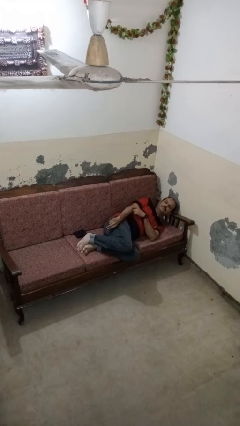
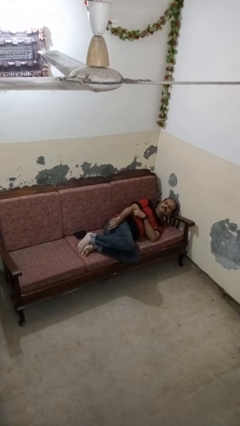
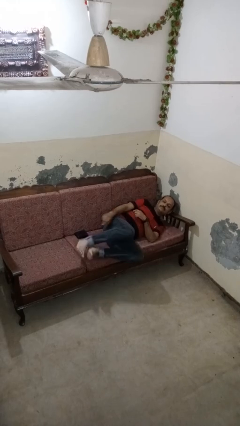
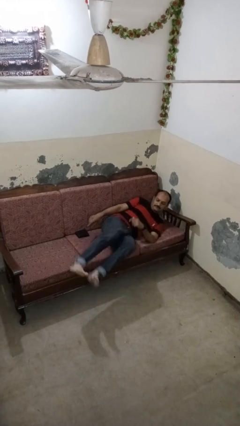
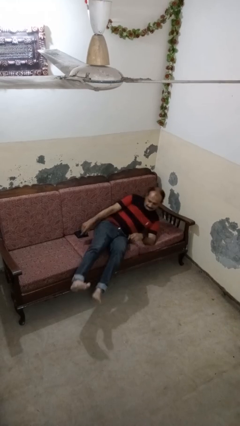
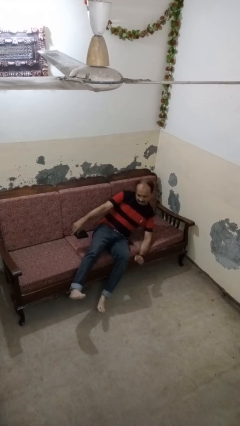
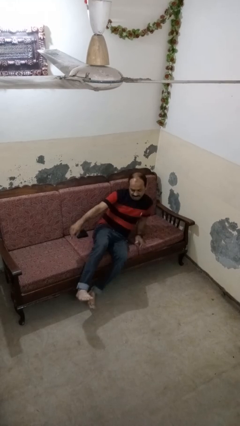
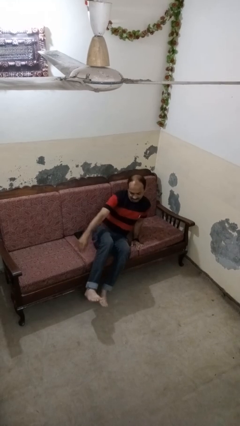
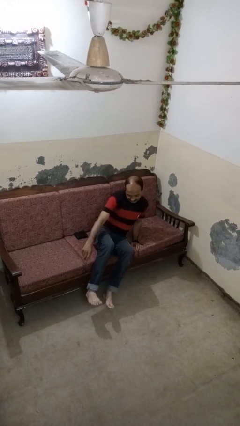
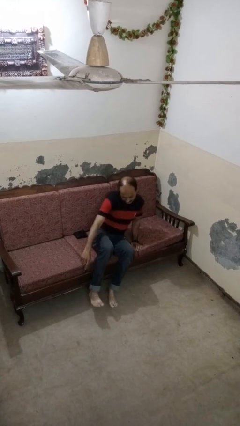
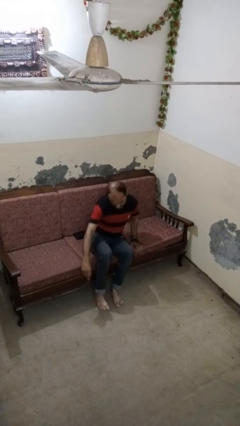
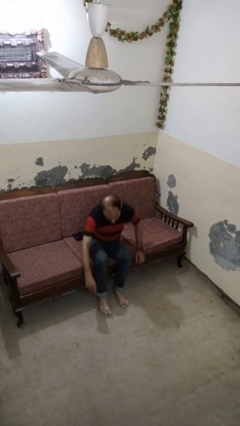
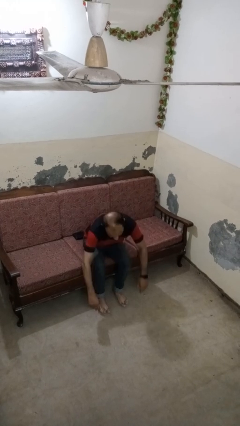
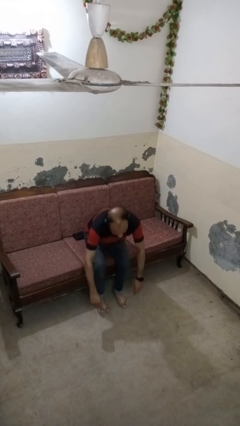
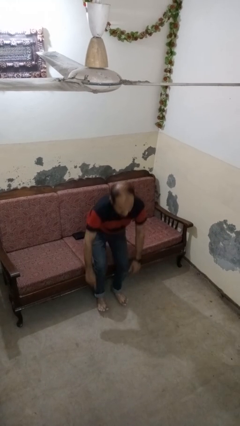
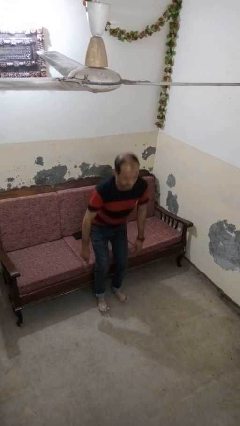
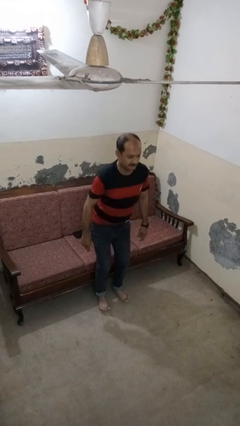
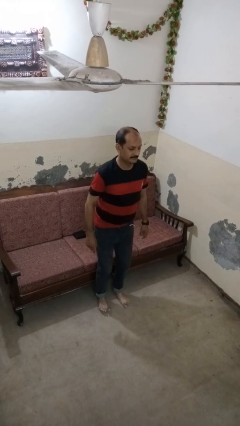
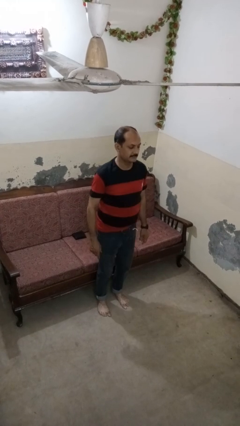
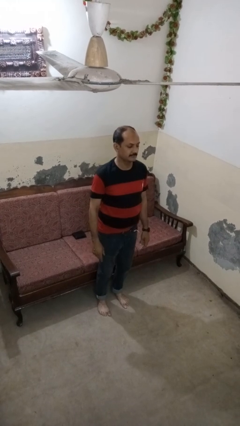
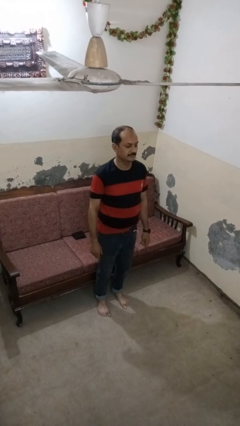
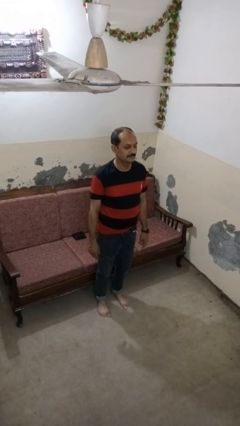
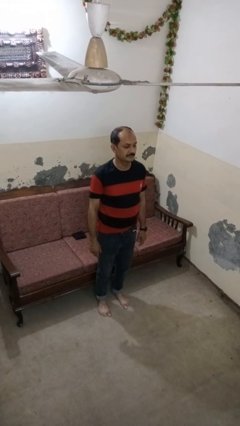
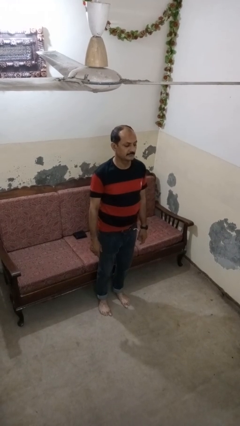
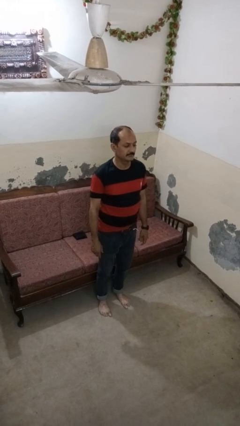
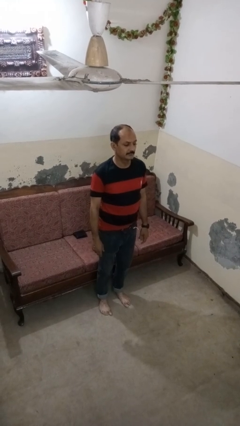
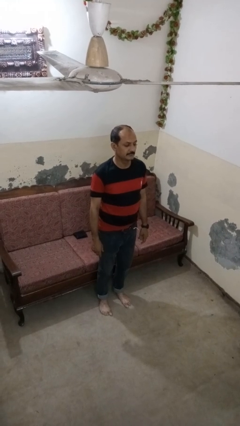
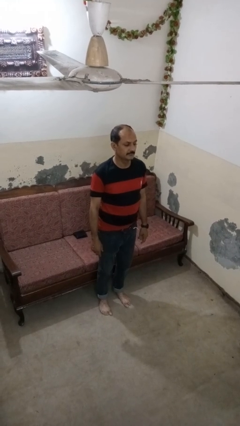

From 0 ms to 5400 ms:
person stands up

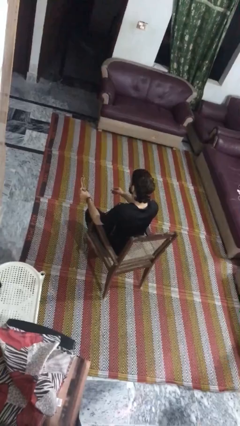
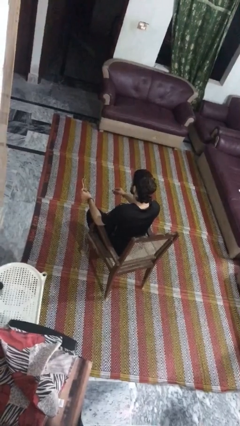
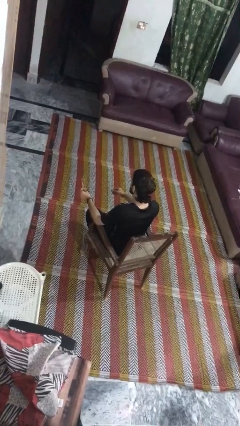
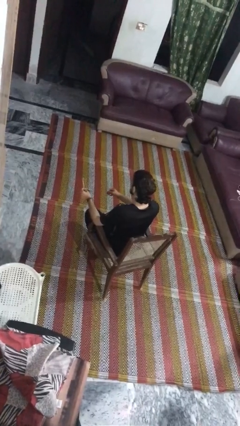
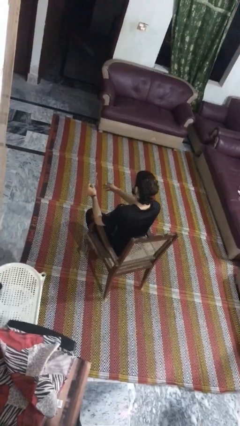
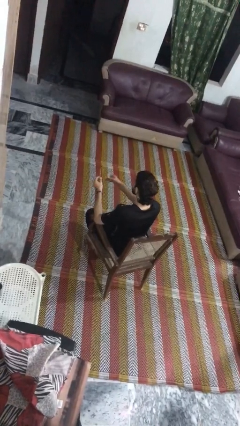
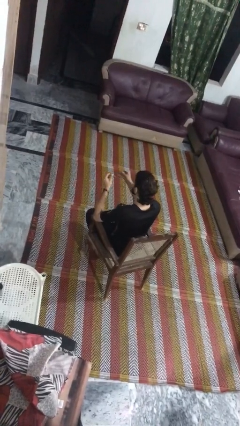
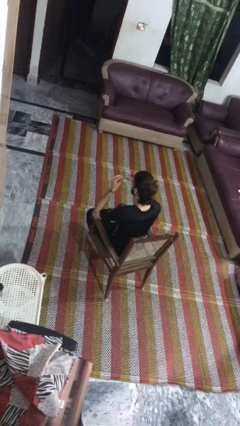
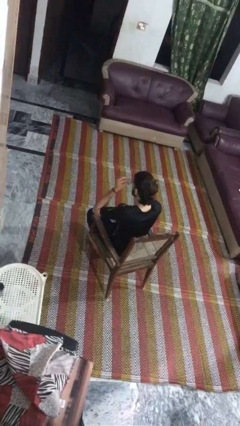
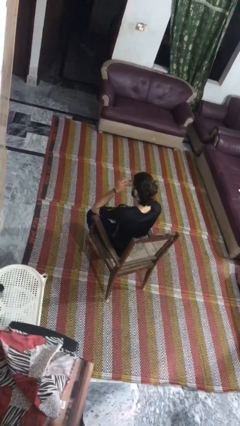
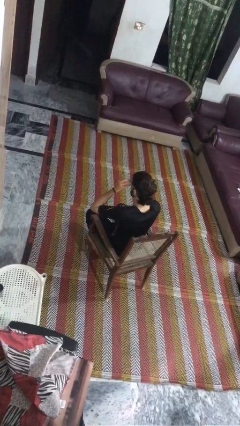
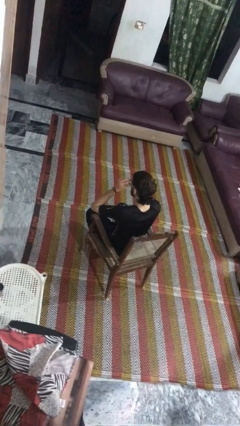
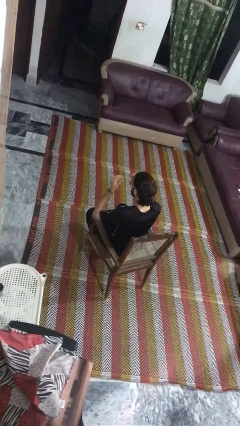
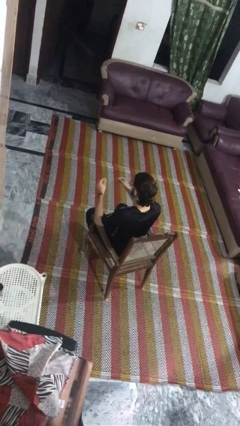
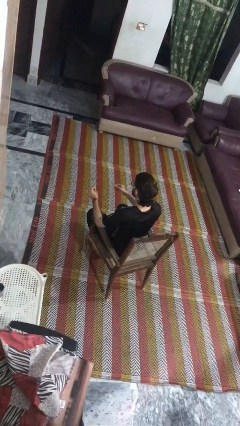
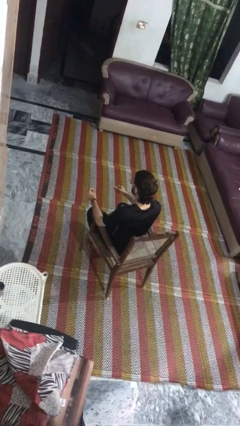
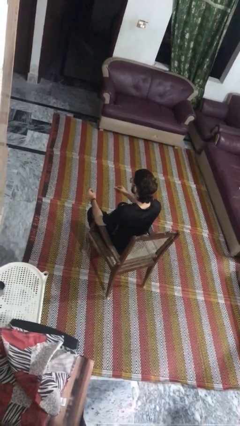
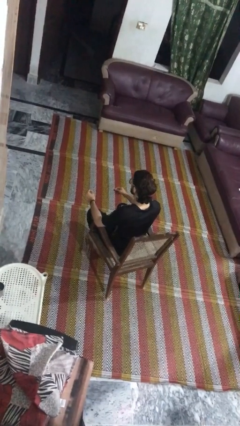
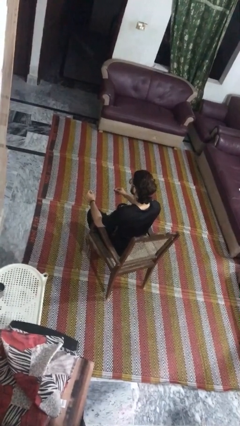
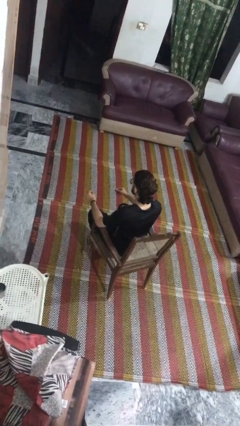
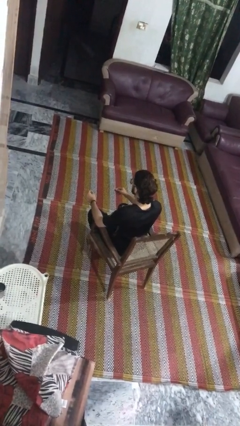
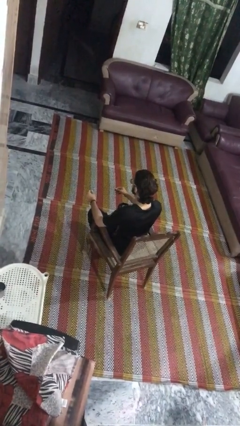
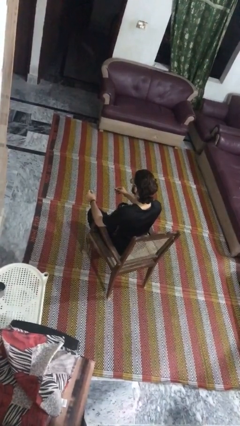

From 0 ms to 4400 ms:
person puts on glasses

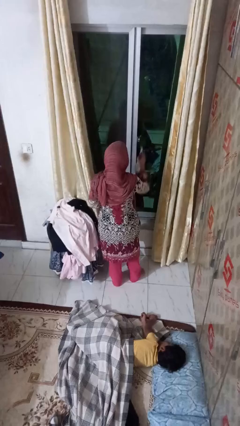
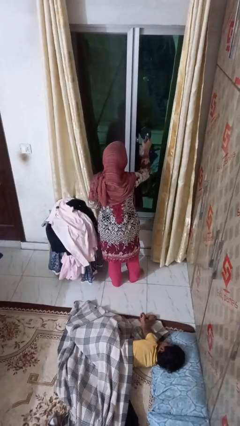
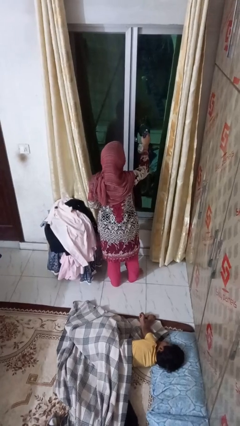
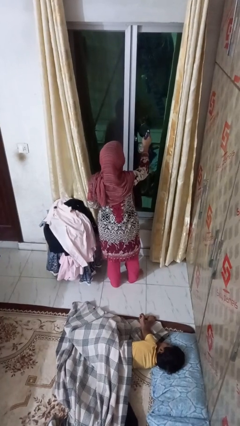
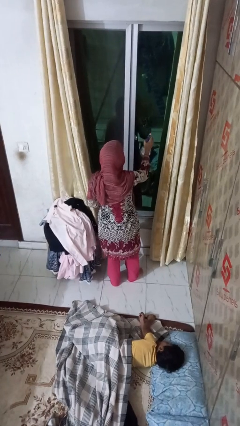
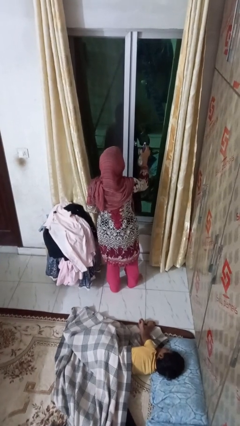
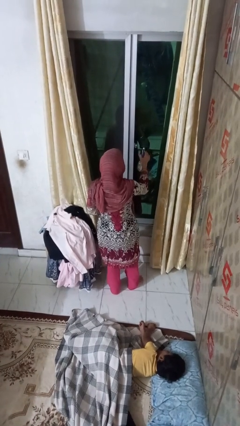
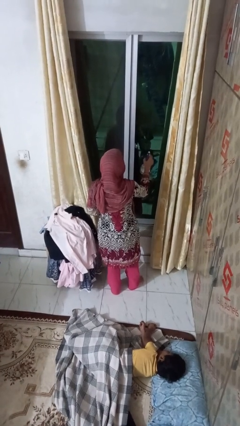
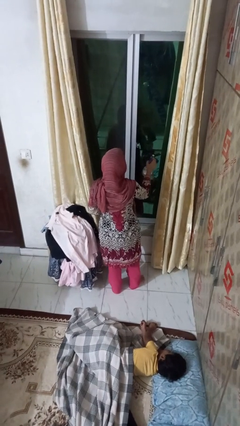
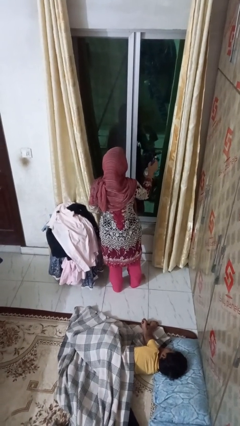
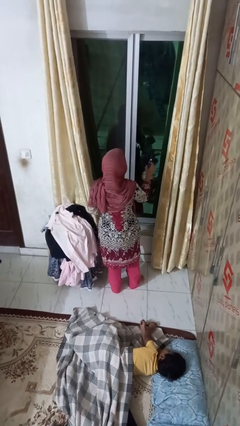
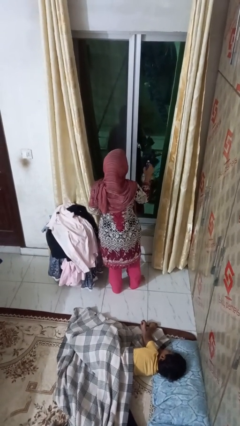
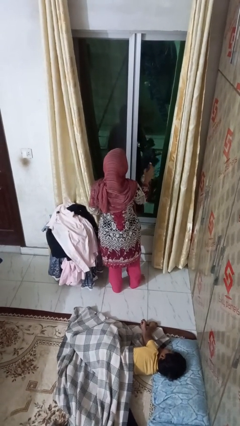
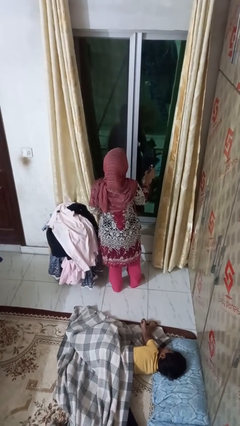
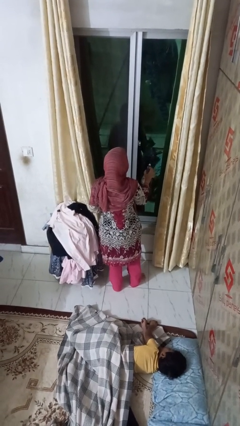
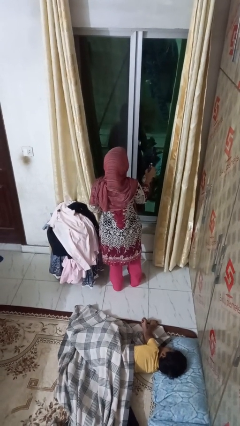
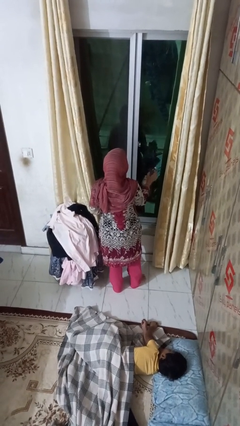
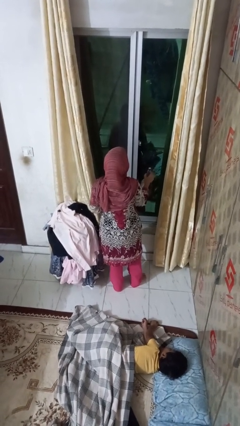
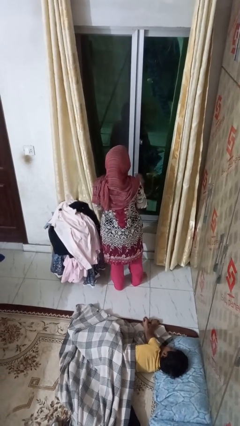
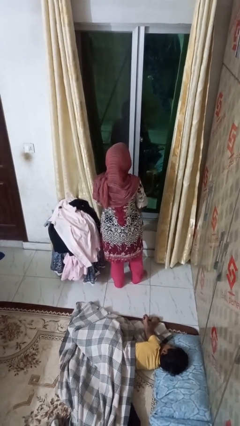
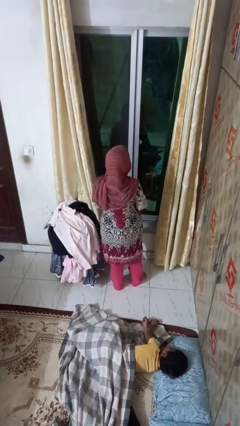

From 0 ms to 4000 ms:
person sprays from bottle

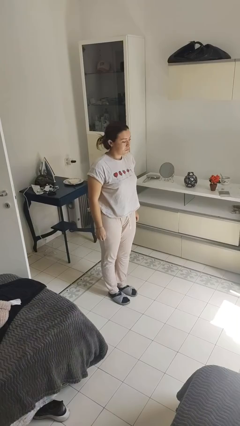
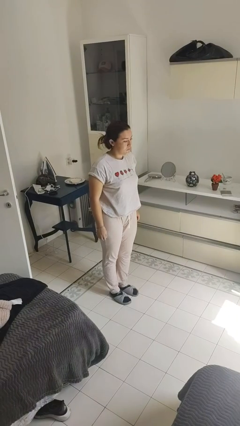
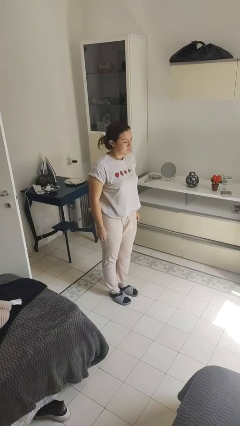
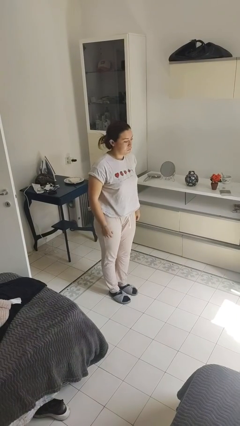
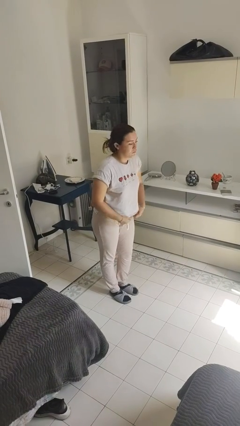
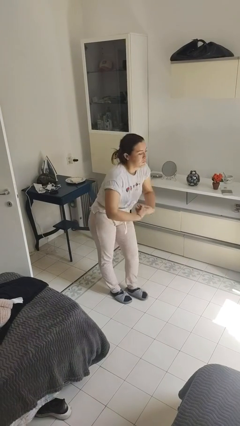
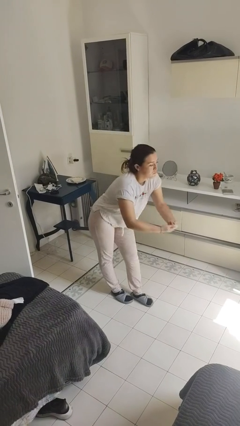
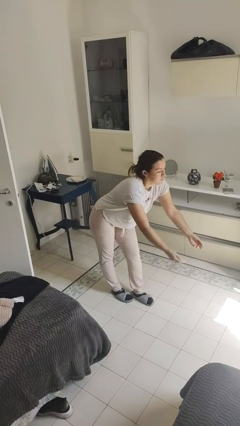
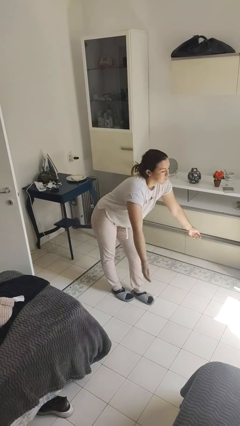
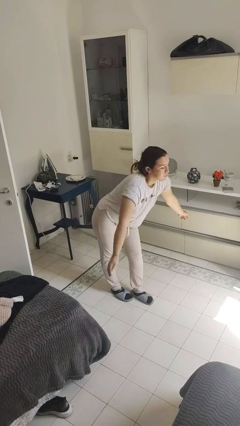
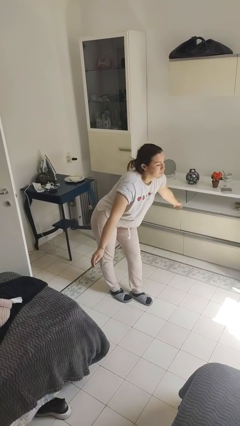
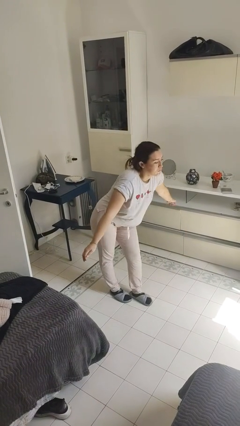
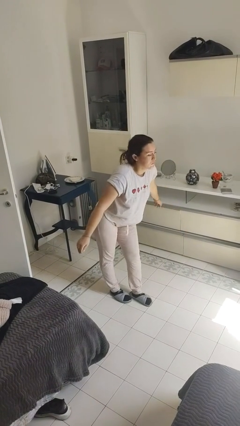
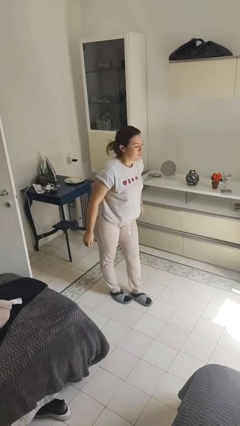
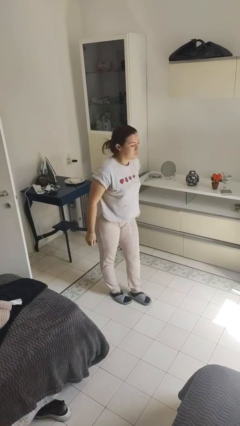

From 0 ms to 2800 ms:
person bows

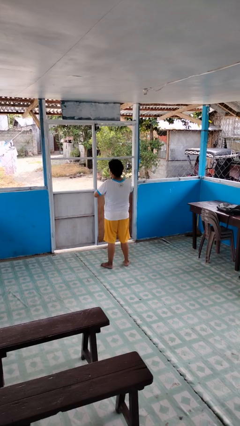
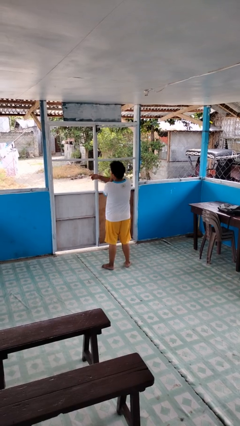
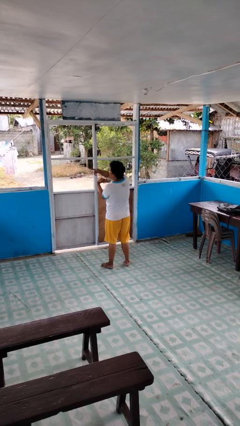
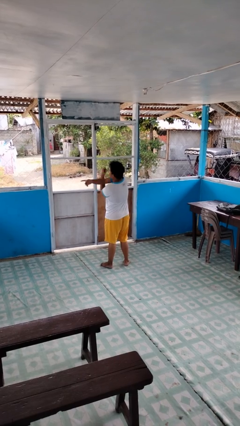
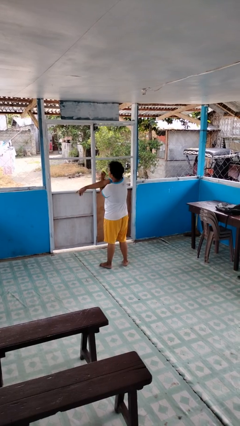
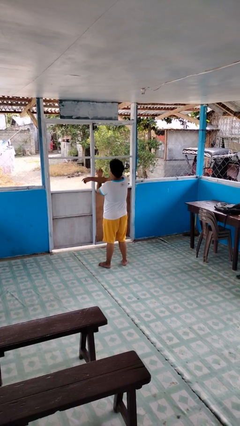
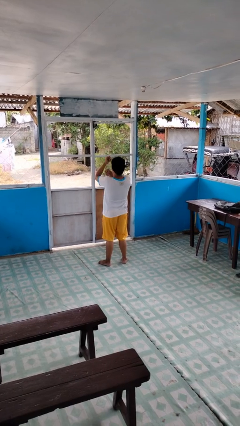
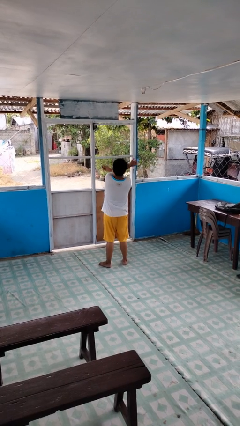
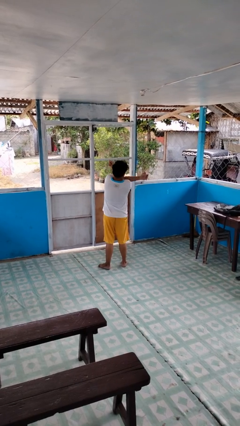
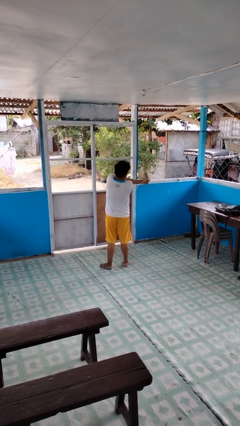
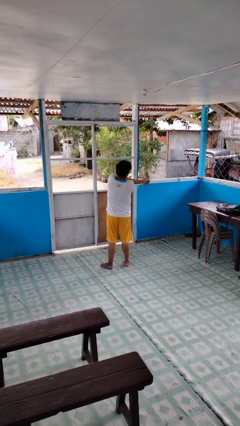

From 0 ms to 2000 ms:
person stretches arms to side
